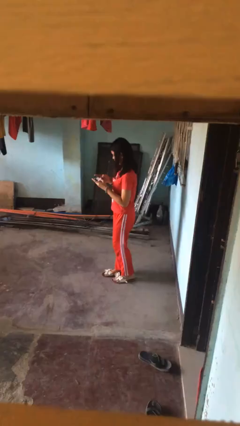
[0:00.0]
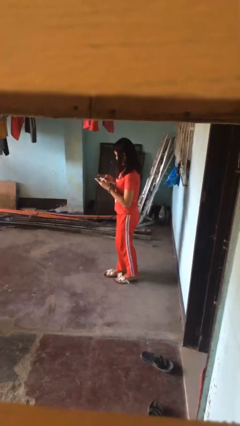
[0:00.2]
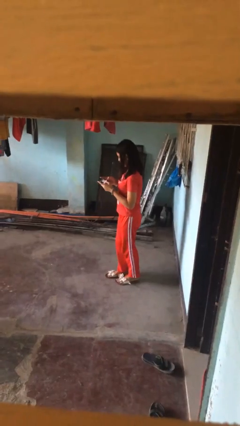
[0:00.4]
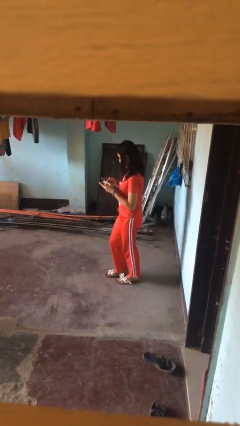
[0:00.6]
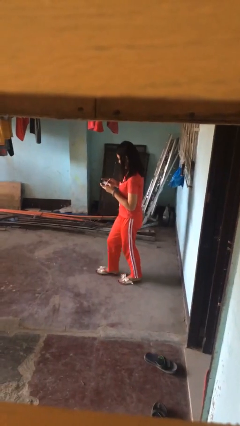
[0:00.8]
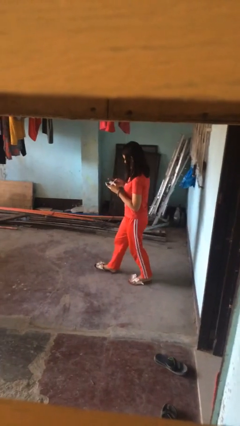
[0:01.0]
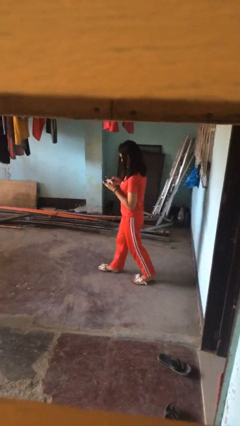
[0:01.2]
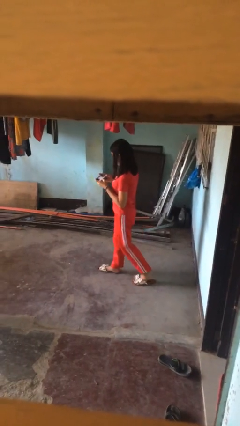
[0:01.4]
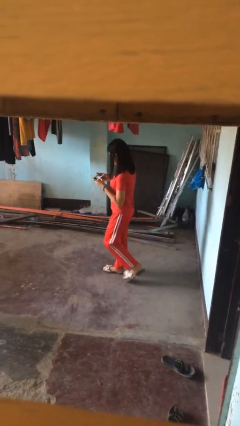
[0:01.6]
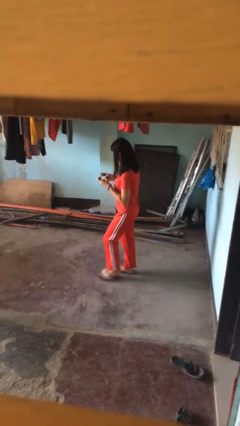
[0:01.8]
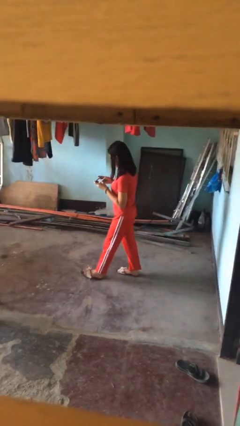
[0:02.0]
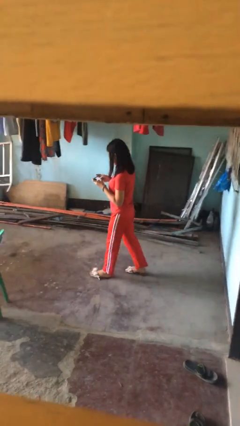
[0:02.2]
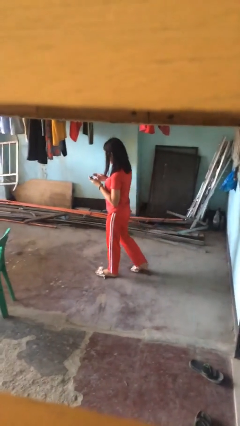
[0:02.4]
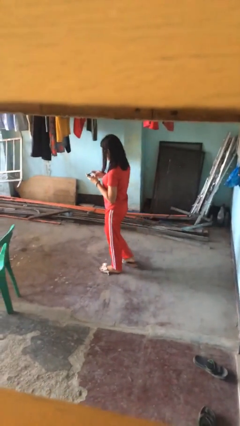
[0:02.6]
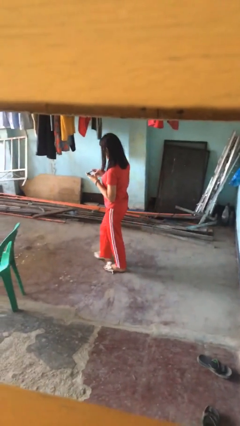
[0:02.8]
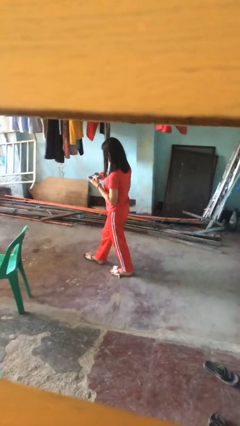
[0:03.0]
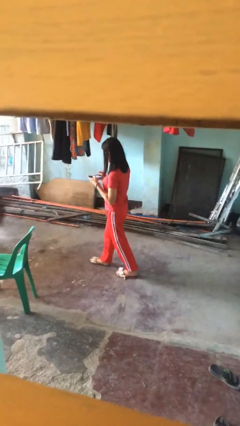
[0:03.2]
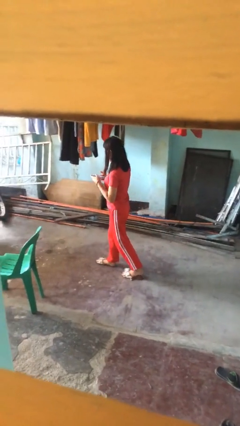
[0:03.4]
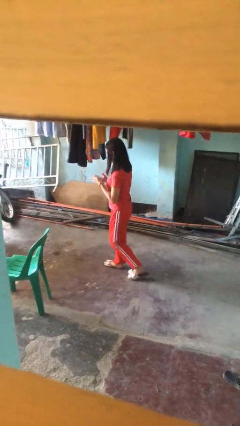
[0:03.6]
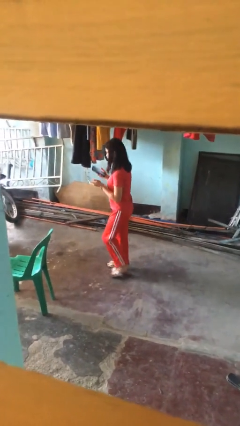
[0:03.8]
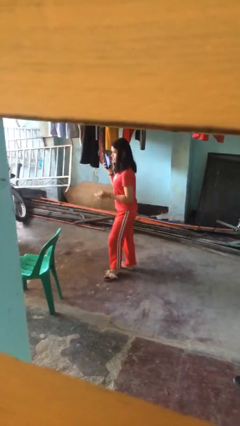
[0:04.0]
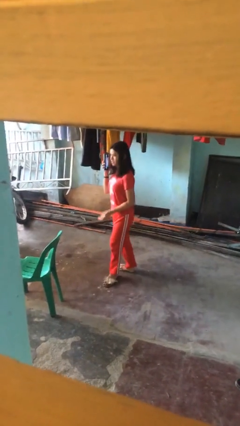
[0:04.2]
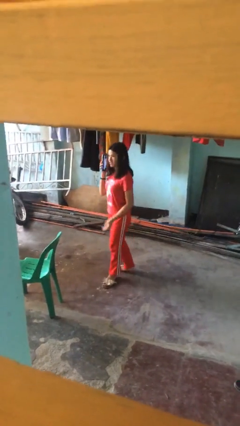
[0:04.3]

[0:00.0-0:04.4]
person texts on phone

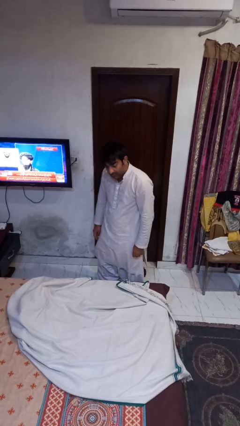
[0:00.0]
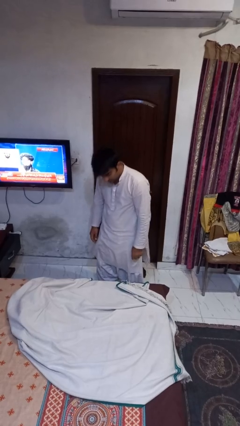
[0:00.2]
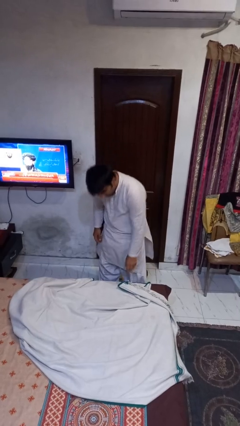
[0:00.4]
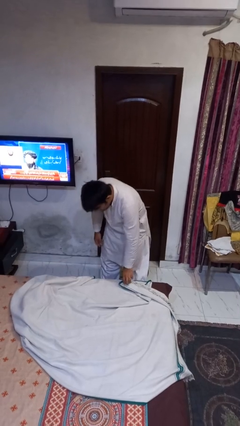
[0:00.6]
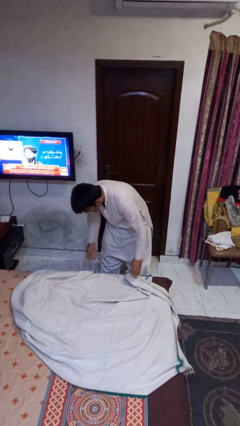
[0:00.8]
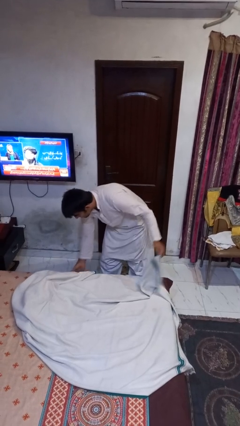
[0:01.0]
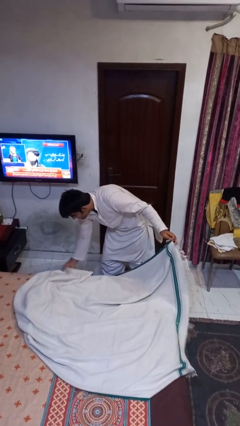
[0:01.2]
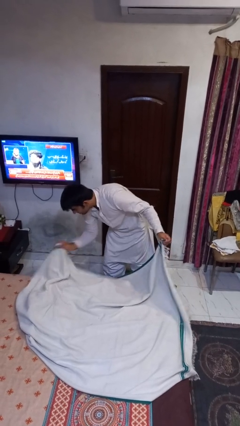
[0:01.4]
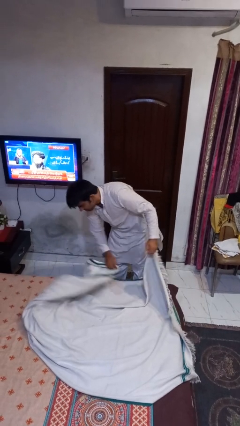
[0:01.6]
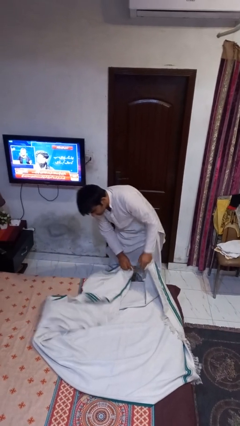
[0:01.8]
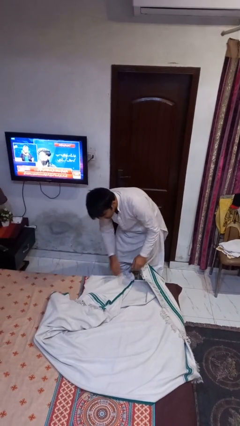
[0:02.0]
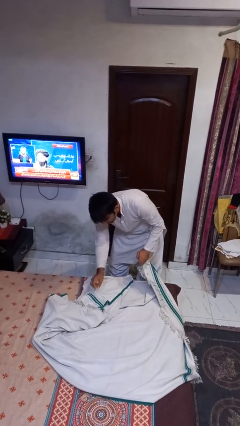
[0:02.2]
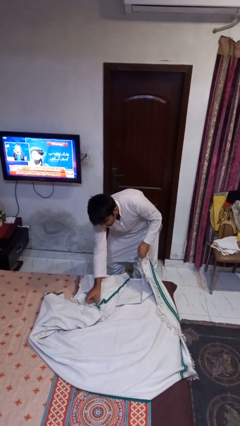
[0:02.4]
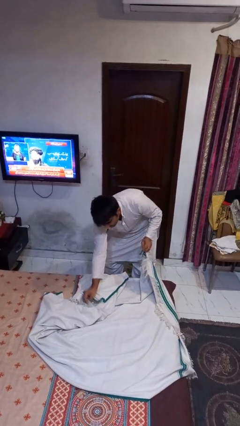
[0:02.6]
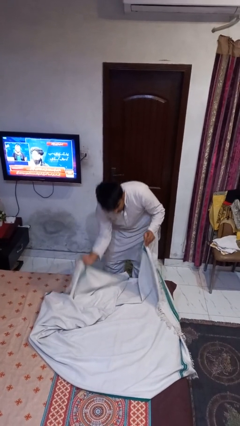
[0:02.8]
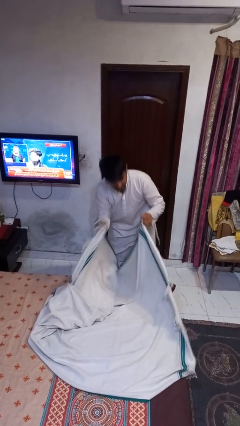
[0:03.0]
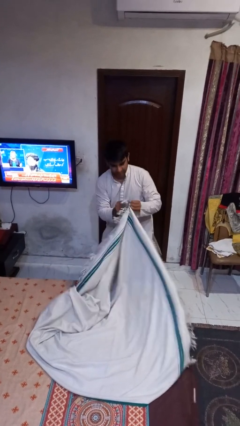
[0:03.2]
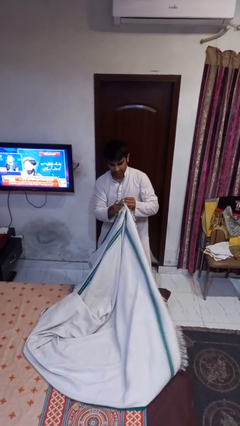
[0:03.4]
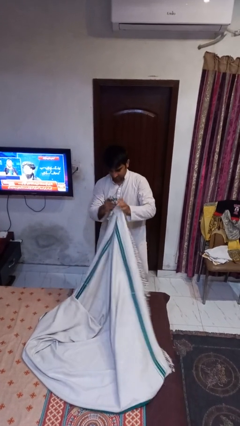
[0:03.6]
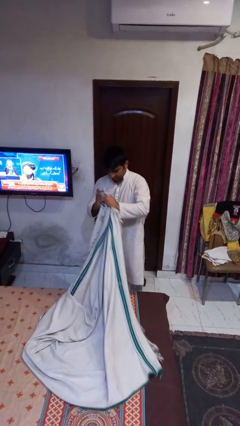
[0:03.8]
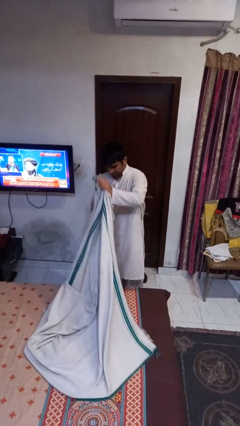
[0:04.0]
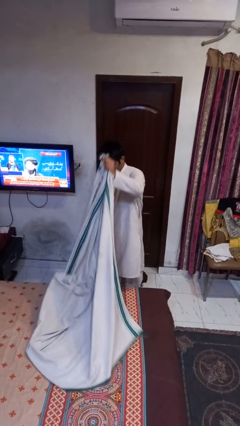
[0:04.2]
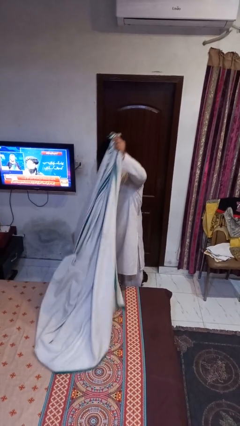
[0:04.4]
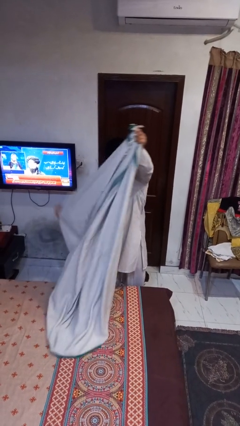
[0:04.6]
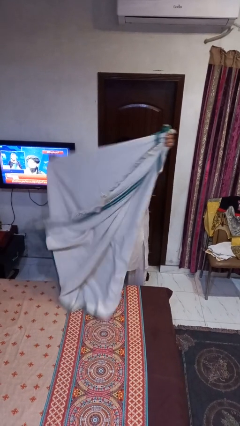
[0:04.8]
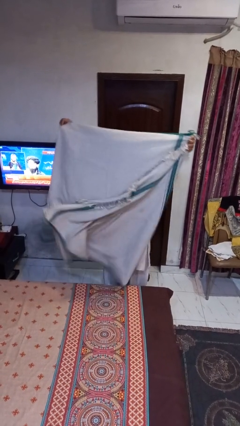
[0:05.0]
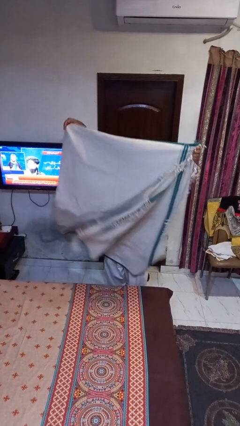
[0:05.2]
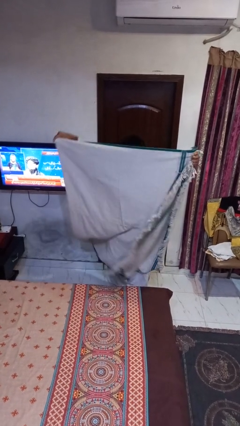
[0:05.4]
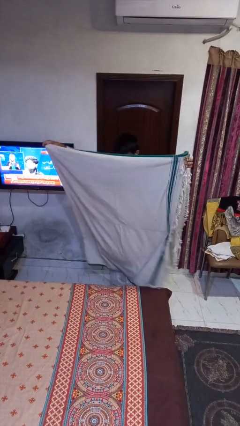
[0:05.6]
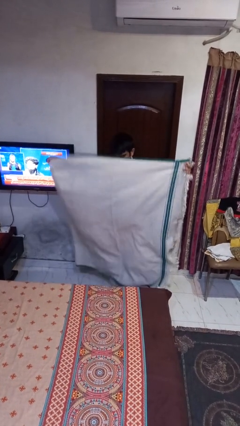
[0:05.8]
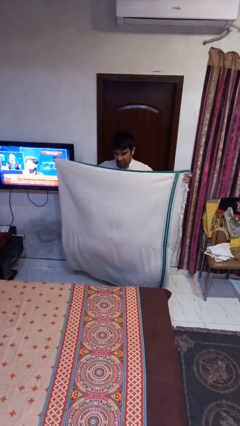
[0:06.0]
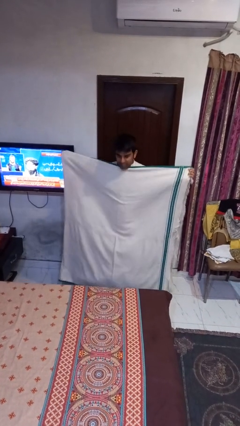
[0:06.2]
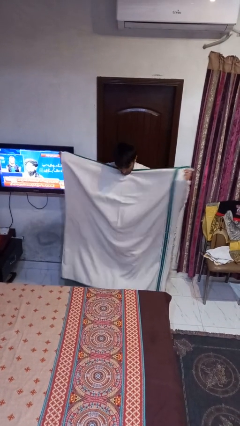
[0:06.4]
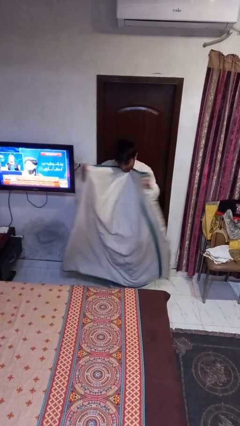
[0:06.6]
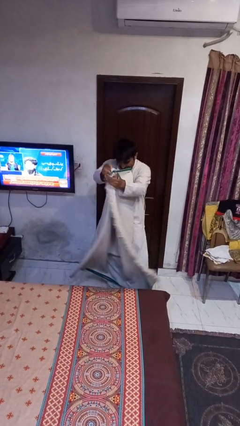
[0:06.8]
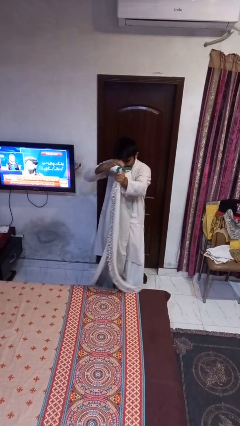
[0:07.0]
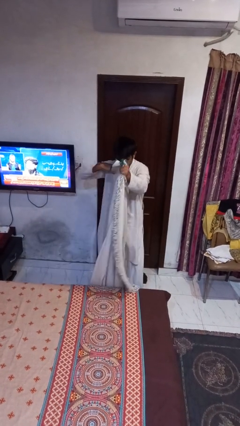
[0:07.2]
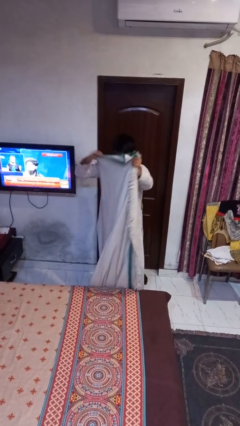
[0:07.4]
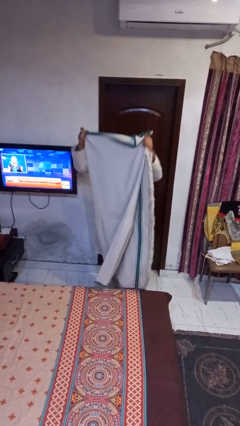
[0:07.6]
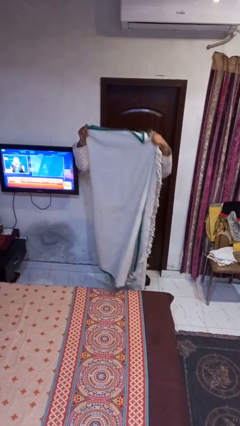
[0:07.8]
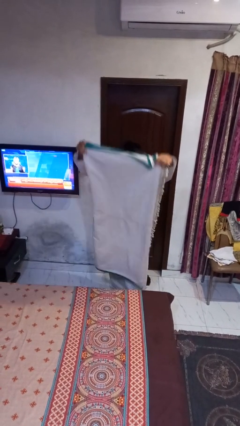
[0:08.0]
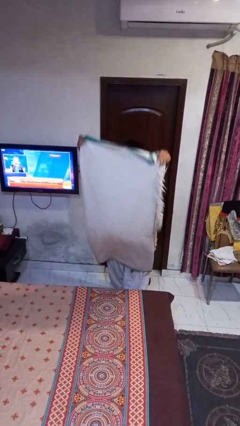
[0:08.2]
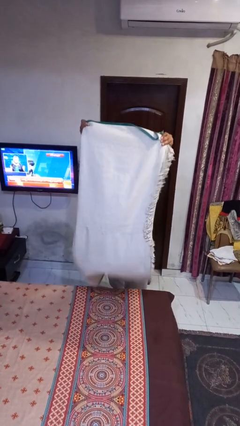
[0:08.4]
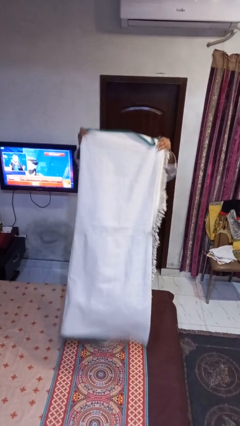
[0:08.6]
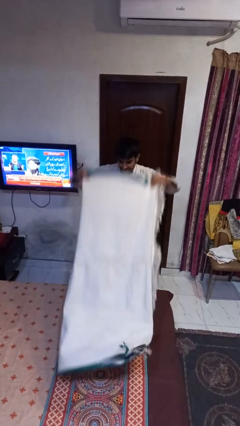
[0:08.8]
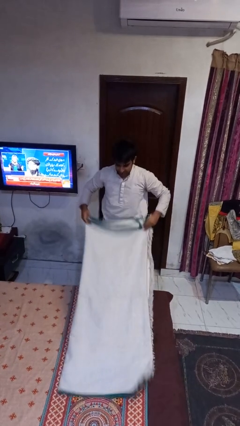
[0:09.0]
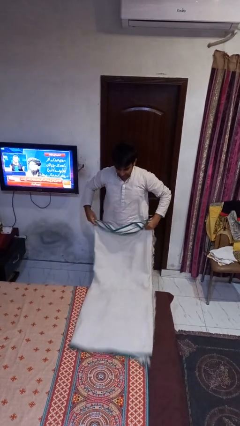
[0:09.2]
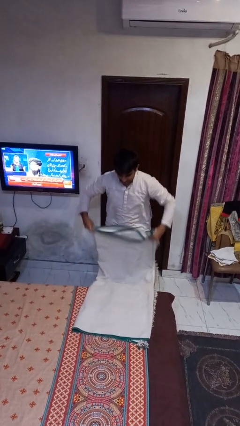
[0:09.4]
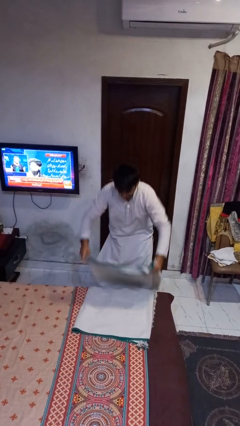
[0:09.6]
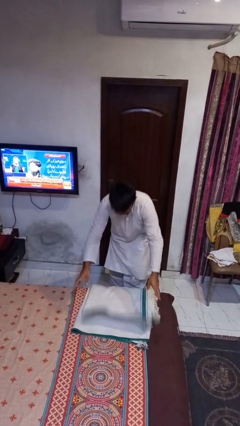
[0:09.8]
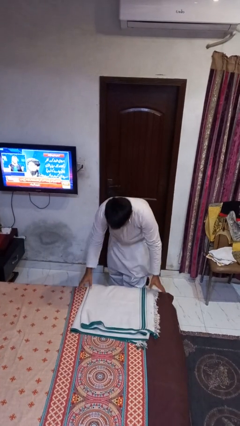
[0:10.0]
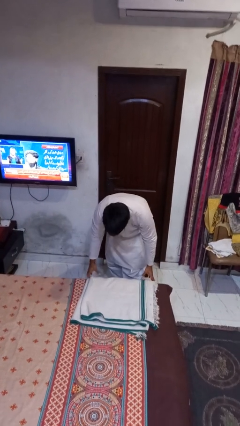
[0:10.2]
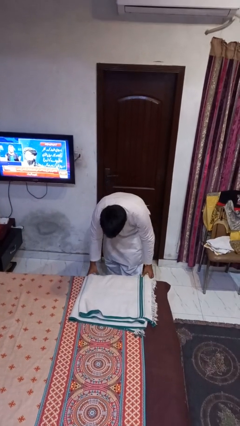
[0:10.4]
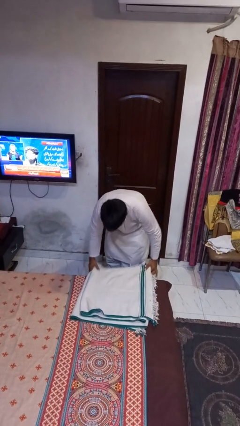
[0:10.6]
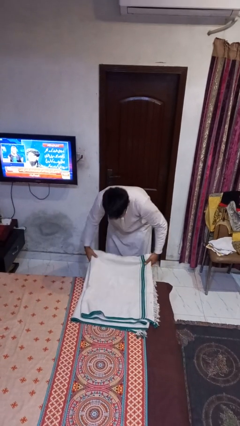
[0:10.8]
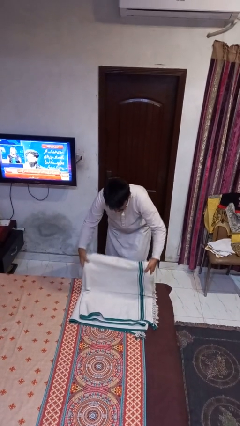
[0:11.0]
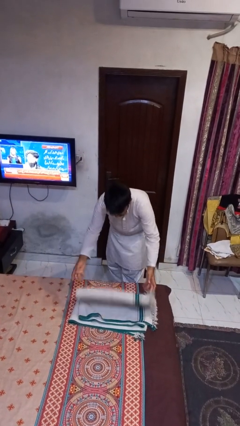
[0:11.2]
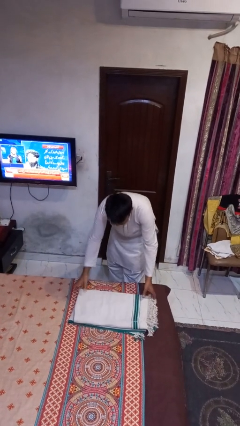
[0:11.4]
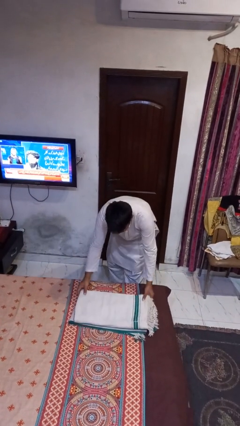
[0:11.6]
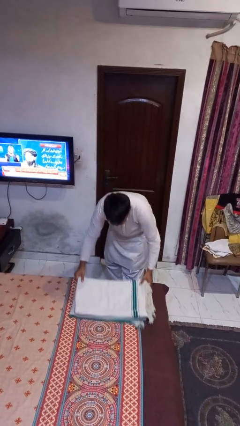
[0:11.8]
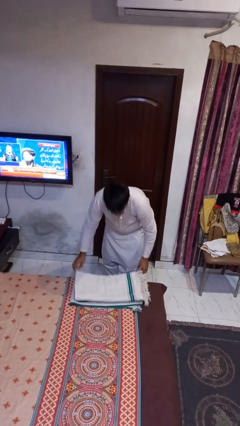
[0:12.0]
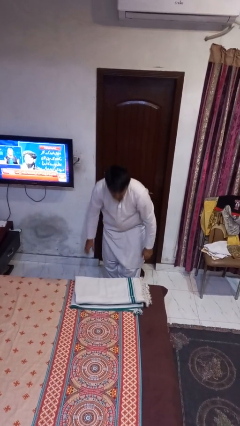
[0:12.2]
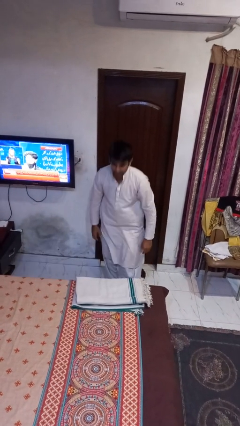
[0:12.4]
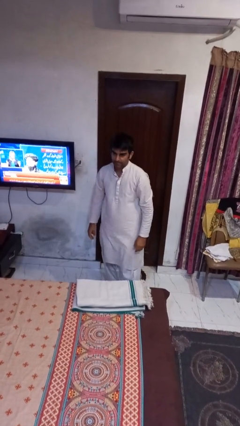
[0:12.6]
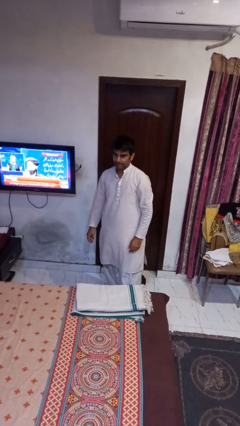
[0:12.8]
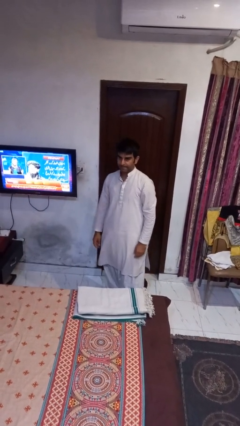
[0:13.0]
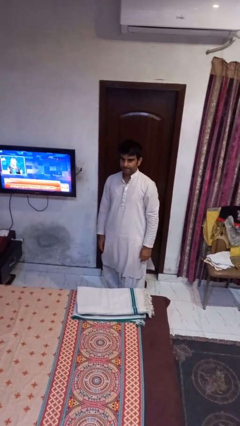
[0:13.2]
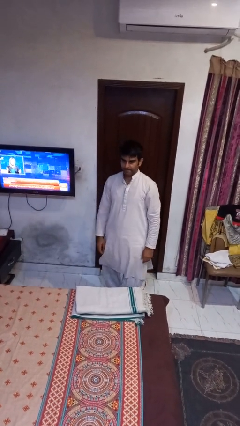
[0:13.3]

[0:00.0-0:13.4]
person folds blanket

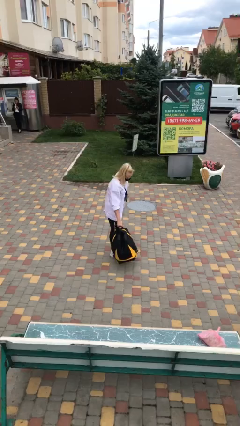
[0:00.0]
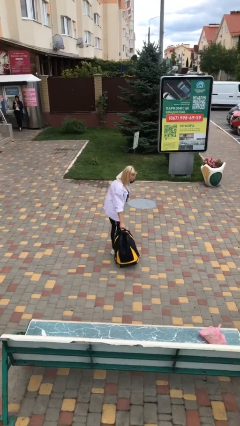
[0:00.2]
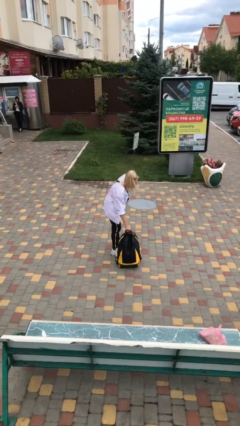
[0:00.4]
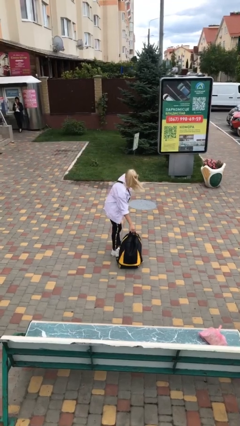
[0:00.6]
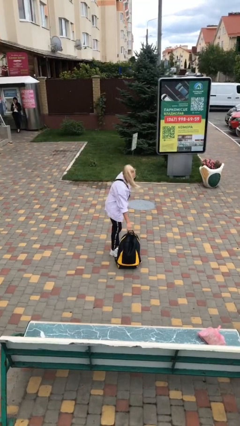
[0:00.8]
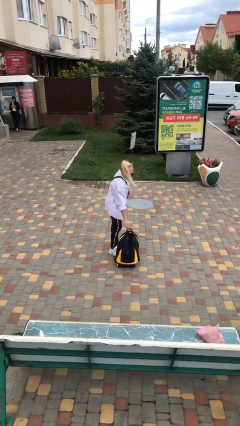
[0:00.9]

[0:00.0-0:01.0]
person puts down object on floor
